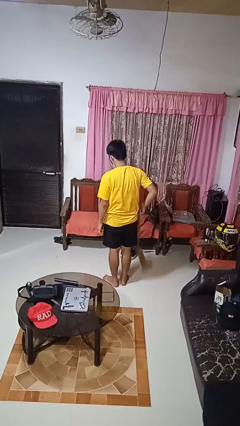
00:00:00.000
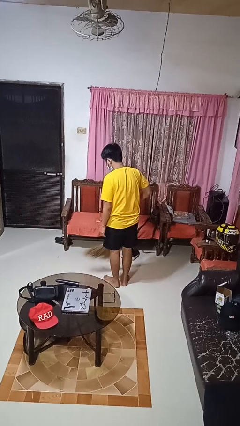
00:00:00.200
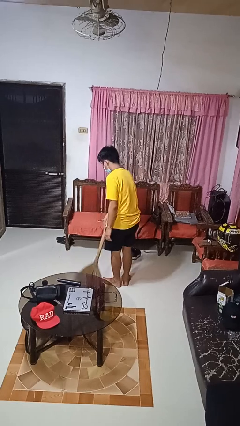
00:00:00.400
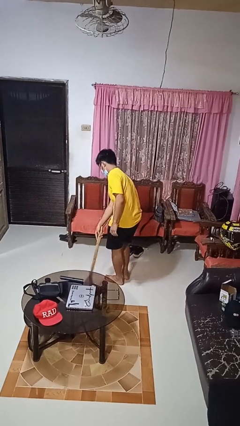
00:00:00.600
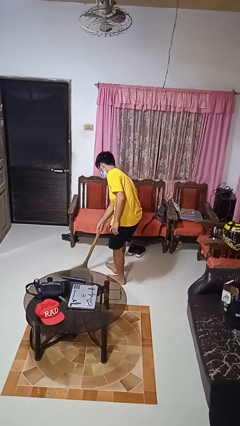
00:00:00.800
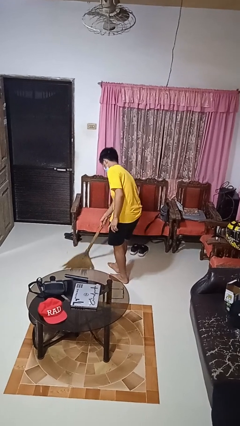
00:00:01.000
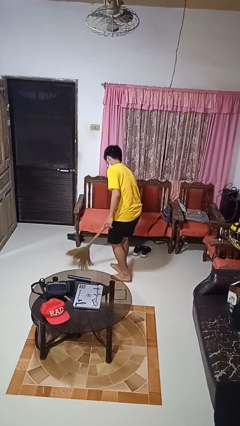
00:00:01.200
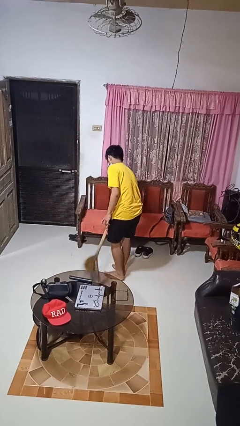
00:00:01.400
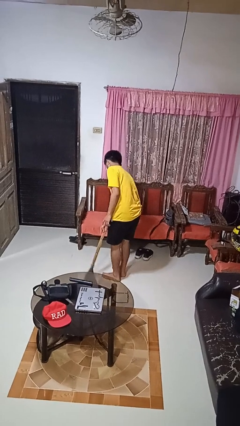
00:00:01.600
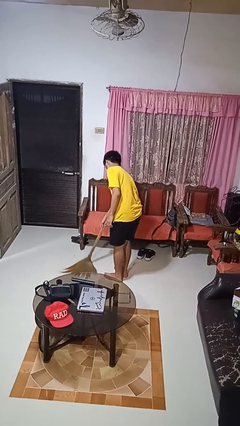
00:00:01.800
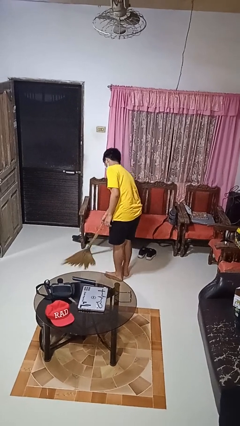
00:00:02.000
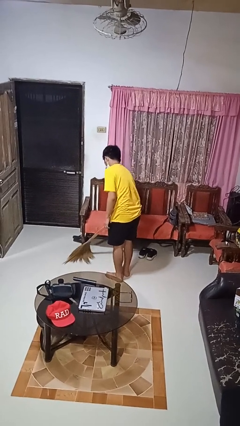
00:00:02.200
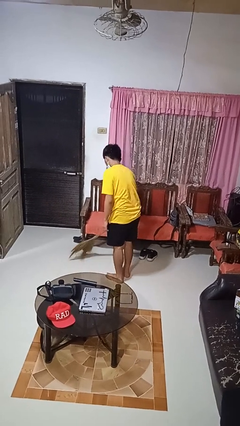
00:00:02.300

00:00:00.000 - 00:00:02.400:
person sweeps floor

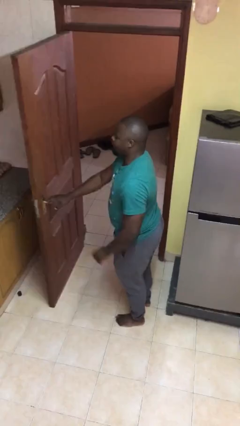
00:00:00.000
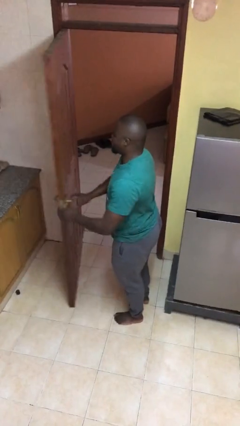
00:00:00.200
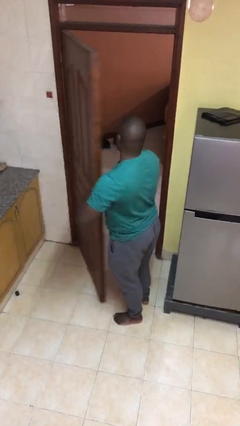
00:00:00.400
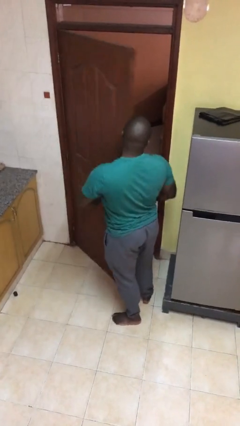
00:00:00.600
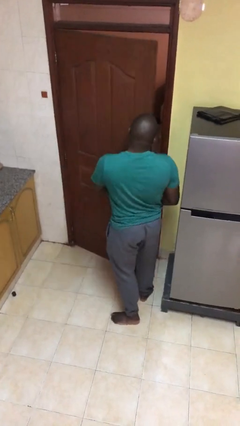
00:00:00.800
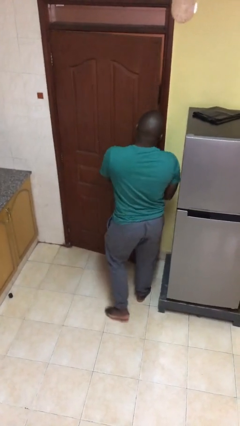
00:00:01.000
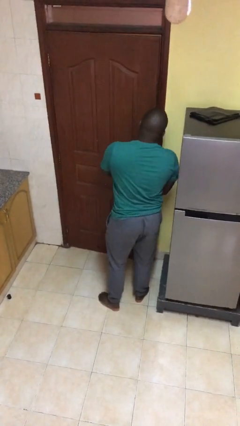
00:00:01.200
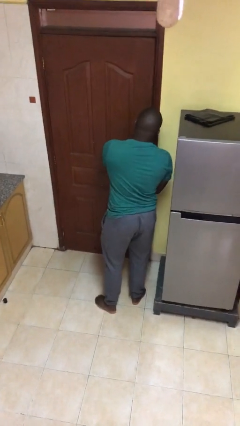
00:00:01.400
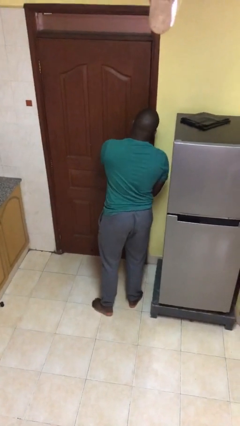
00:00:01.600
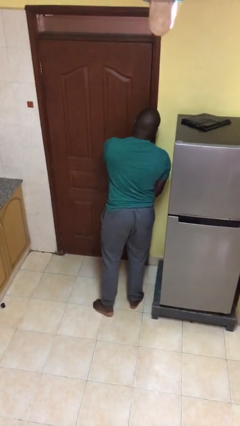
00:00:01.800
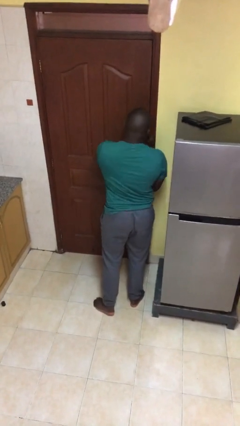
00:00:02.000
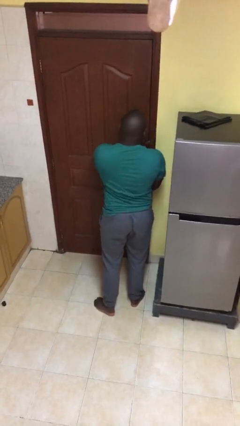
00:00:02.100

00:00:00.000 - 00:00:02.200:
person closes facility door

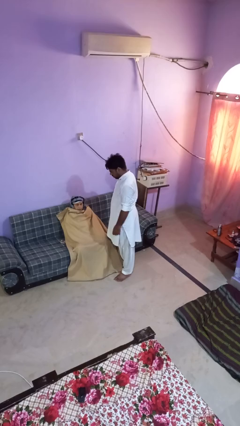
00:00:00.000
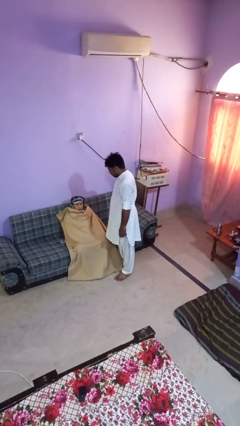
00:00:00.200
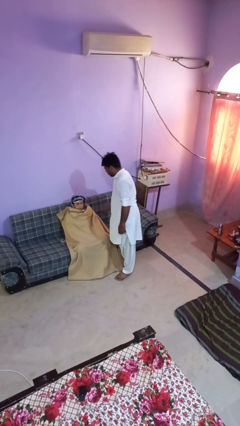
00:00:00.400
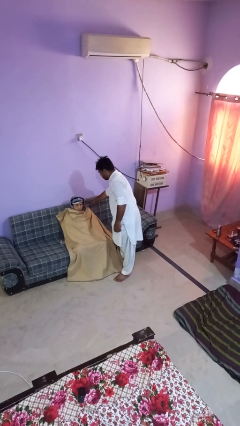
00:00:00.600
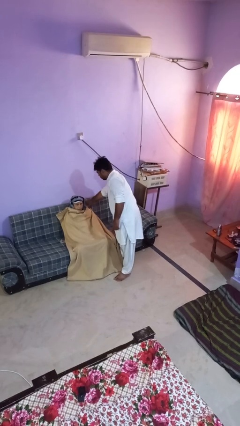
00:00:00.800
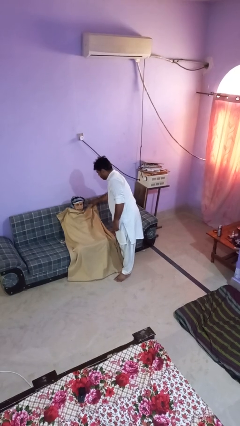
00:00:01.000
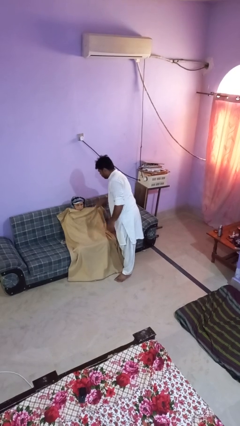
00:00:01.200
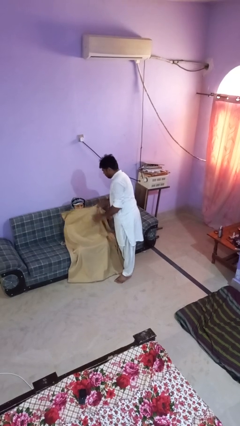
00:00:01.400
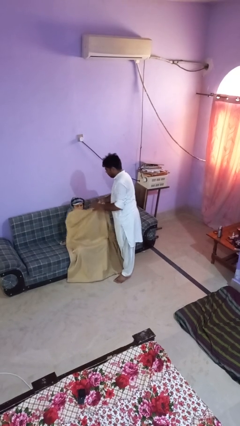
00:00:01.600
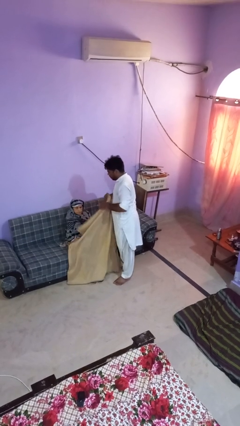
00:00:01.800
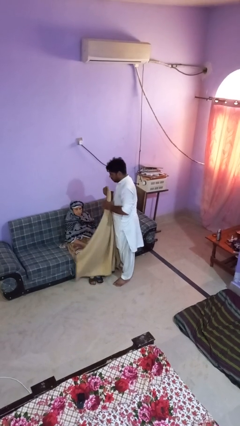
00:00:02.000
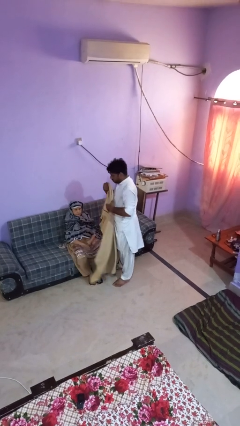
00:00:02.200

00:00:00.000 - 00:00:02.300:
person uncovers friend with blanket

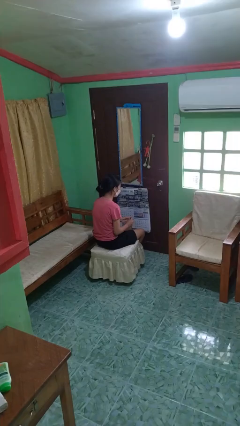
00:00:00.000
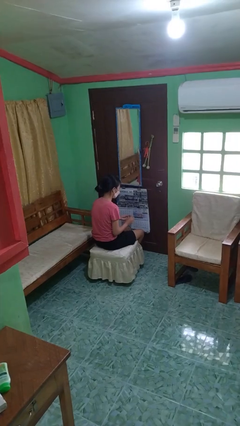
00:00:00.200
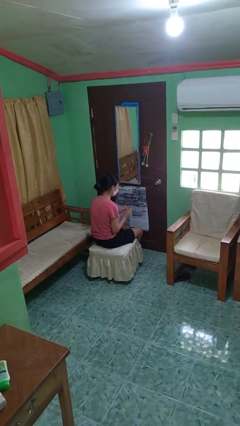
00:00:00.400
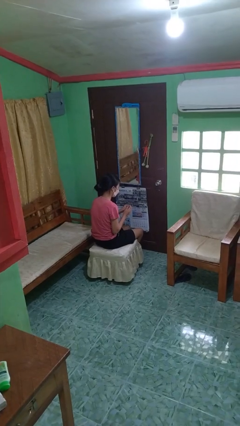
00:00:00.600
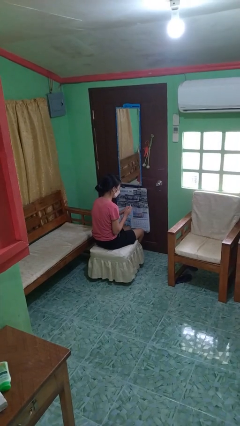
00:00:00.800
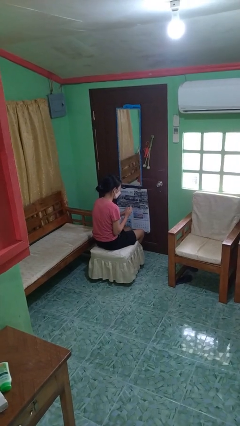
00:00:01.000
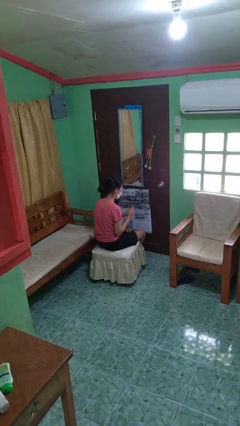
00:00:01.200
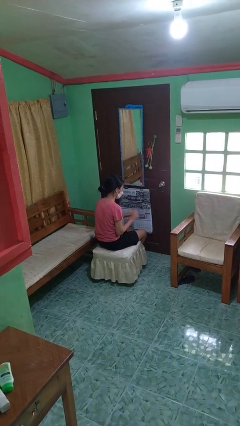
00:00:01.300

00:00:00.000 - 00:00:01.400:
person puts on ring

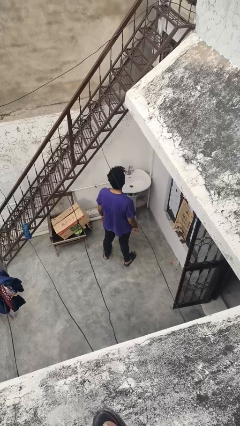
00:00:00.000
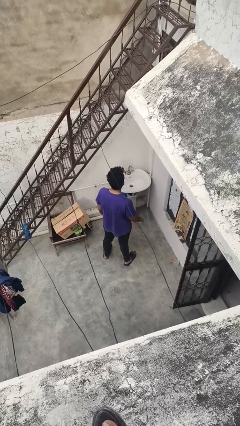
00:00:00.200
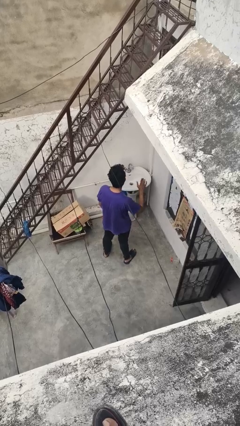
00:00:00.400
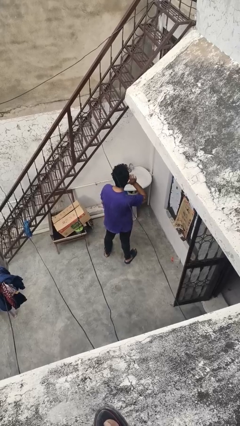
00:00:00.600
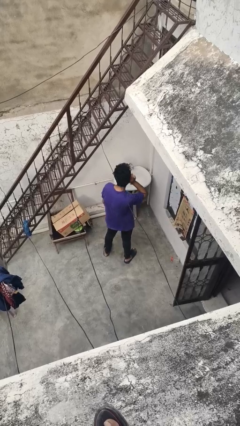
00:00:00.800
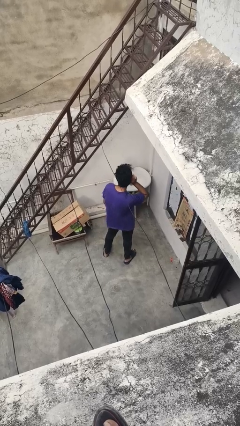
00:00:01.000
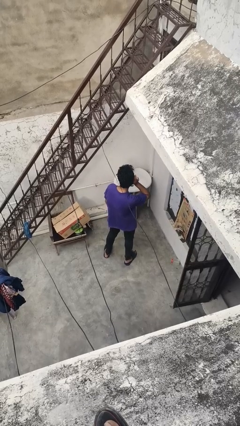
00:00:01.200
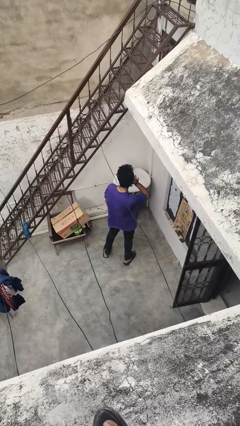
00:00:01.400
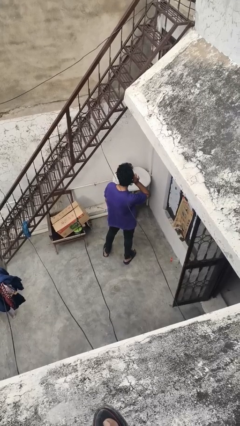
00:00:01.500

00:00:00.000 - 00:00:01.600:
person gestures listen closely

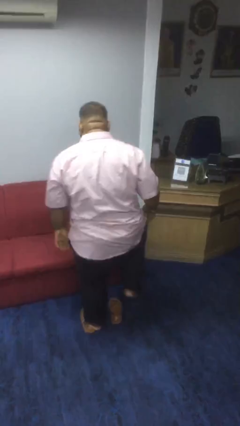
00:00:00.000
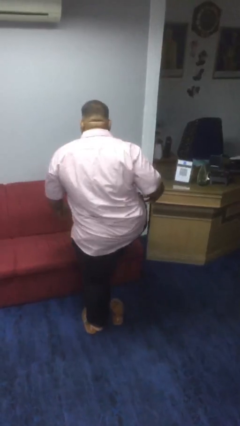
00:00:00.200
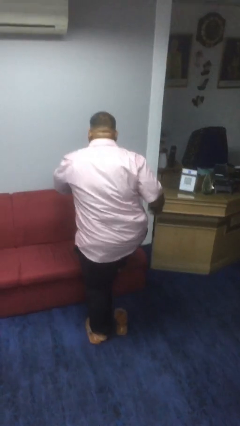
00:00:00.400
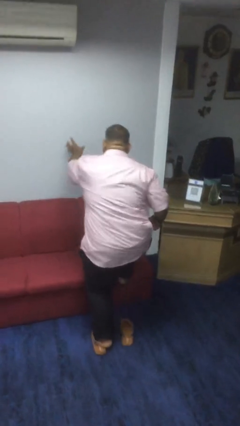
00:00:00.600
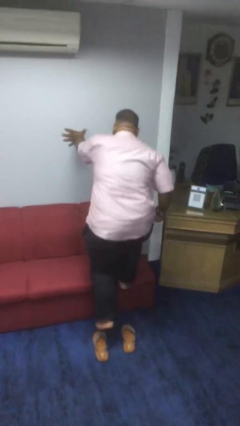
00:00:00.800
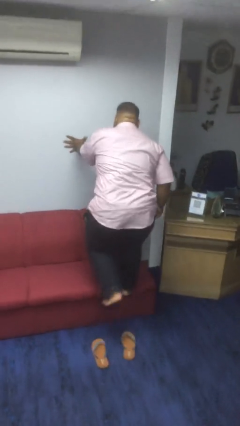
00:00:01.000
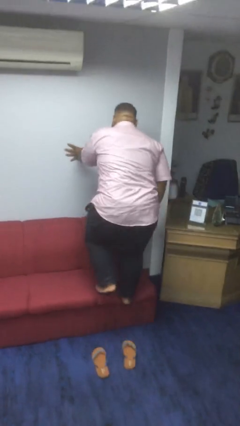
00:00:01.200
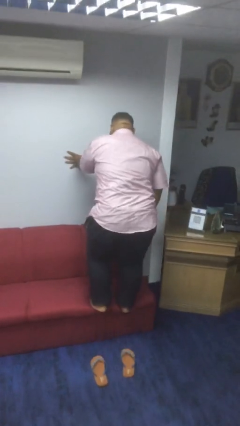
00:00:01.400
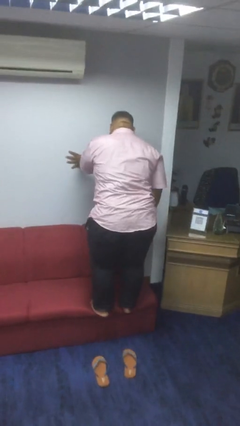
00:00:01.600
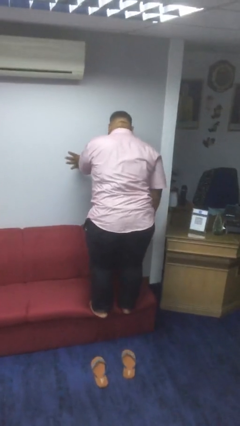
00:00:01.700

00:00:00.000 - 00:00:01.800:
person climbs on couch

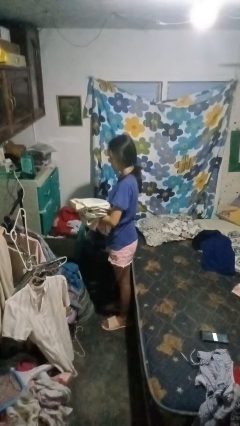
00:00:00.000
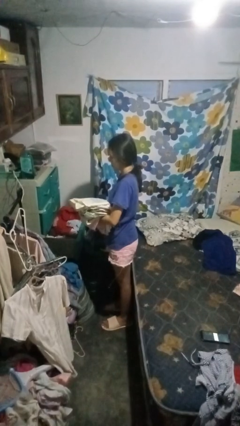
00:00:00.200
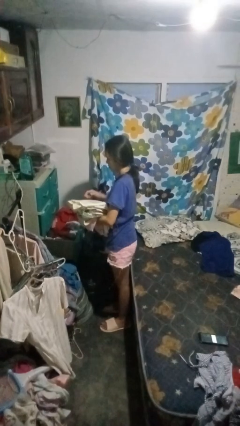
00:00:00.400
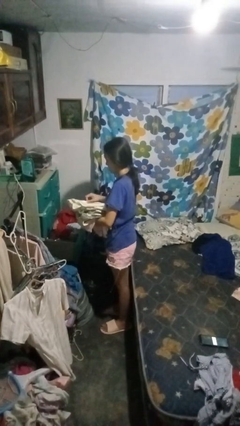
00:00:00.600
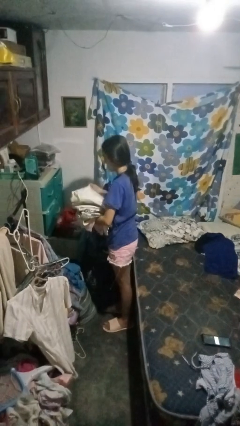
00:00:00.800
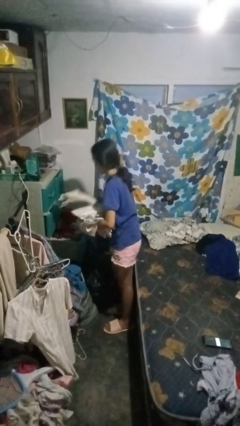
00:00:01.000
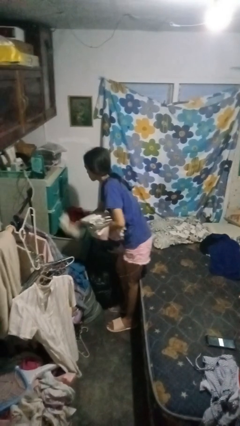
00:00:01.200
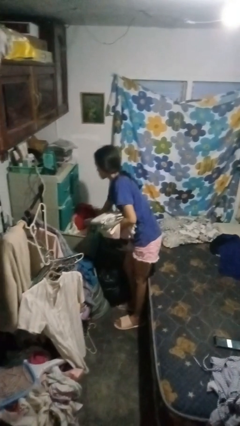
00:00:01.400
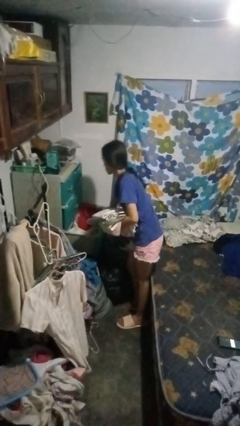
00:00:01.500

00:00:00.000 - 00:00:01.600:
person puts clothes into dresser

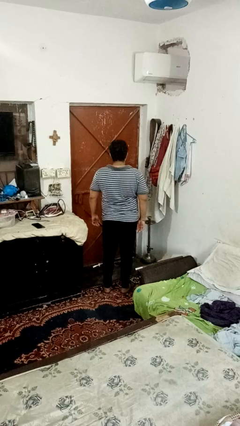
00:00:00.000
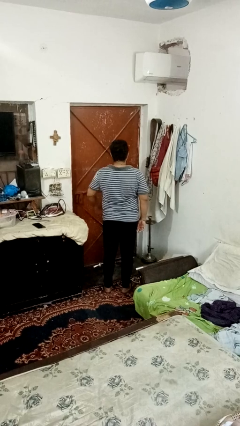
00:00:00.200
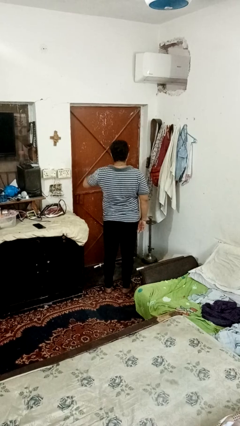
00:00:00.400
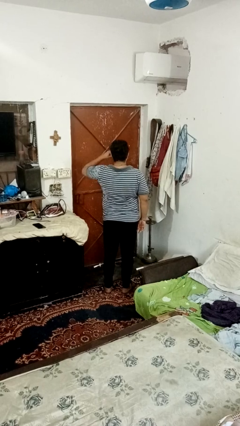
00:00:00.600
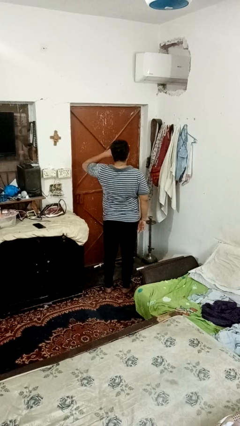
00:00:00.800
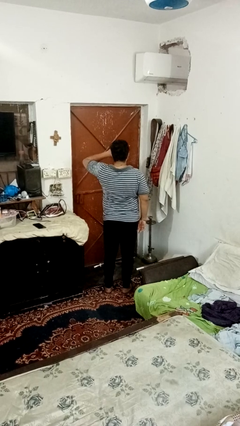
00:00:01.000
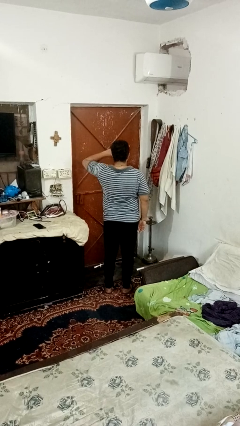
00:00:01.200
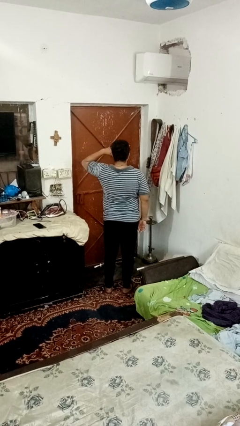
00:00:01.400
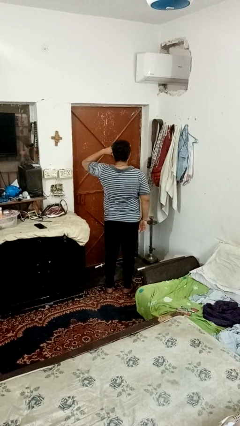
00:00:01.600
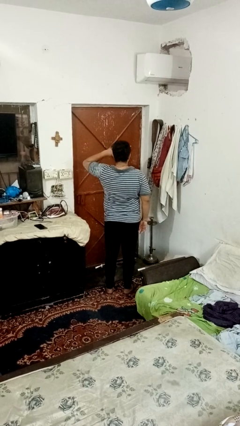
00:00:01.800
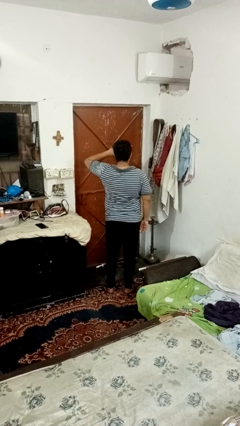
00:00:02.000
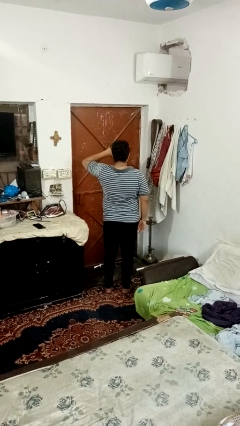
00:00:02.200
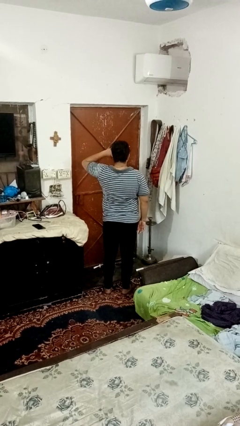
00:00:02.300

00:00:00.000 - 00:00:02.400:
person rubs eyes

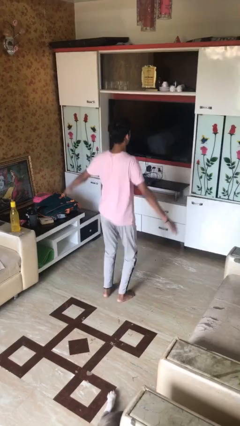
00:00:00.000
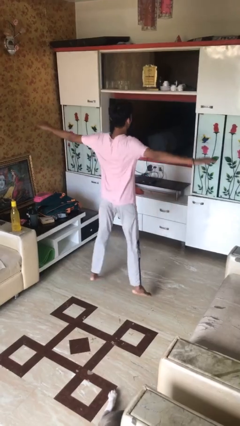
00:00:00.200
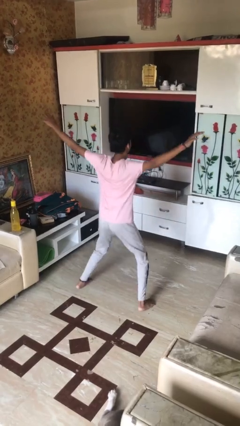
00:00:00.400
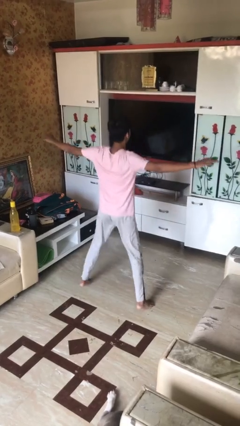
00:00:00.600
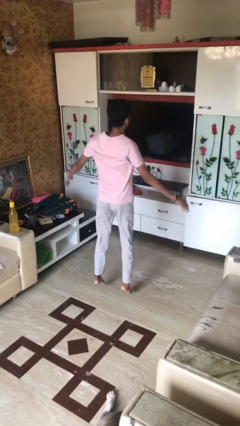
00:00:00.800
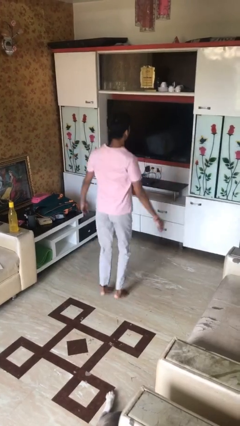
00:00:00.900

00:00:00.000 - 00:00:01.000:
person exercises with jumping jacks
